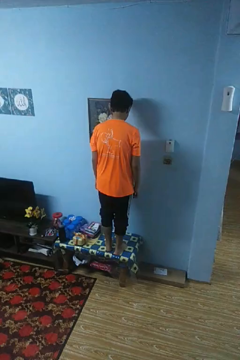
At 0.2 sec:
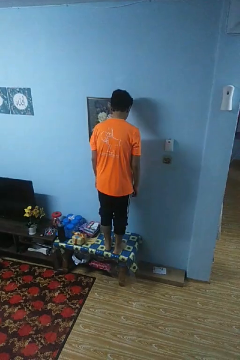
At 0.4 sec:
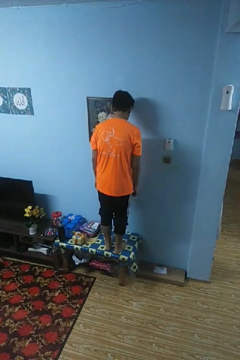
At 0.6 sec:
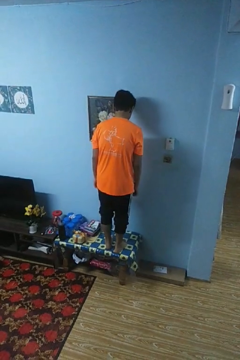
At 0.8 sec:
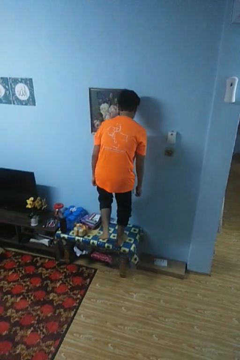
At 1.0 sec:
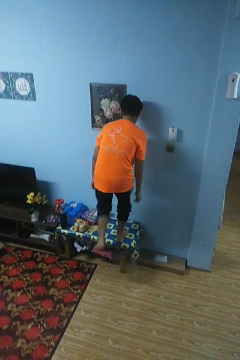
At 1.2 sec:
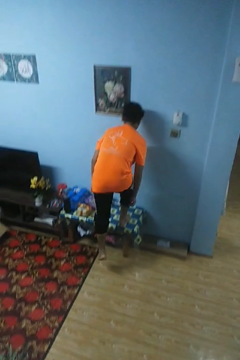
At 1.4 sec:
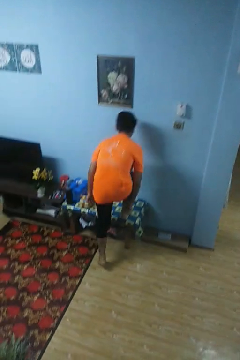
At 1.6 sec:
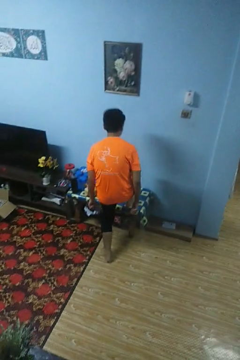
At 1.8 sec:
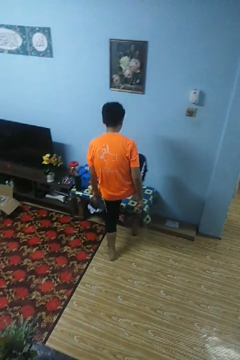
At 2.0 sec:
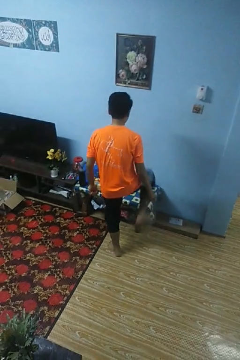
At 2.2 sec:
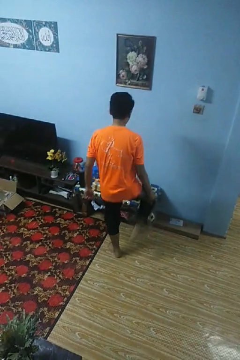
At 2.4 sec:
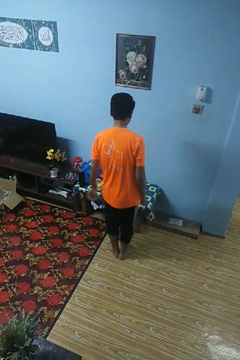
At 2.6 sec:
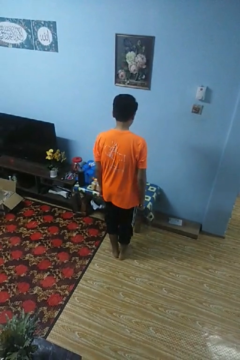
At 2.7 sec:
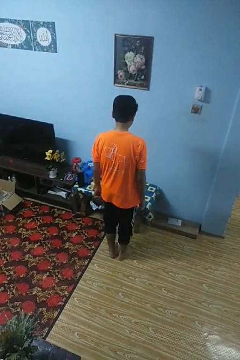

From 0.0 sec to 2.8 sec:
person climbs off table

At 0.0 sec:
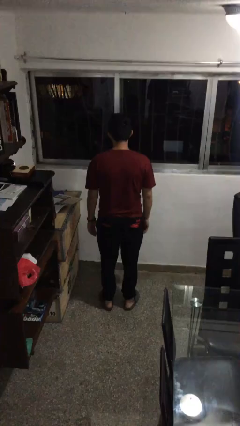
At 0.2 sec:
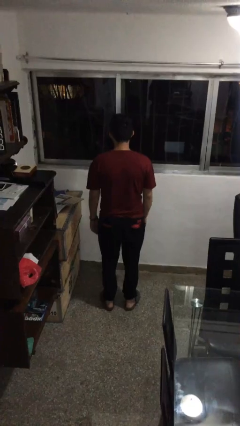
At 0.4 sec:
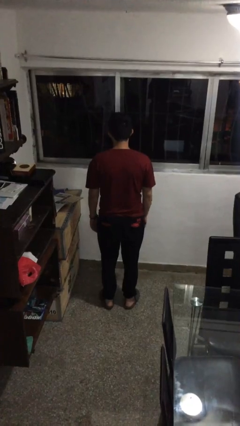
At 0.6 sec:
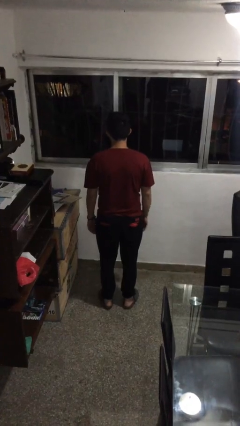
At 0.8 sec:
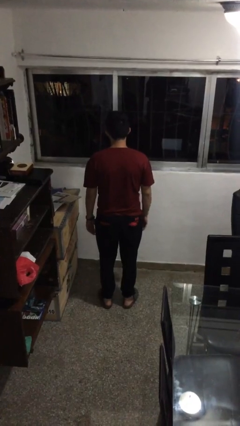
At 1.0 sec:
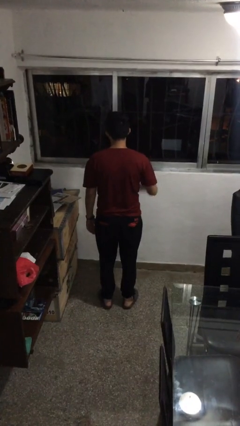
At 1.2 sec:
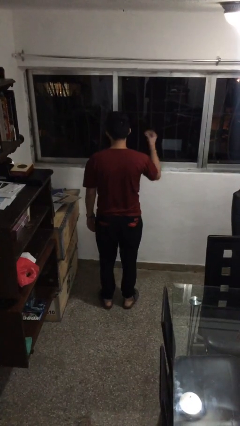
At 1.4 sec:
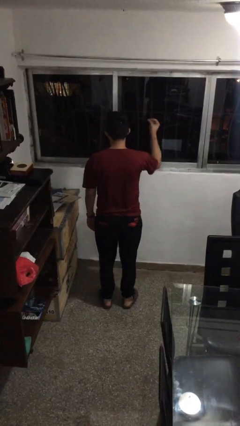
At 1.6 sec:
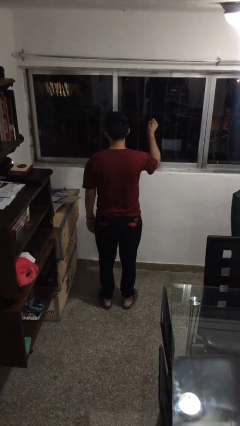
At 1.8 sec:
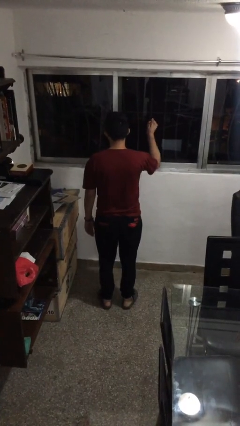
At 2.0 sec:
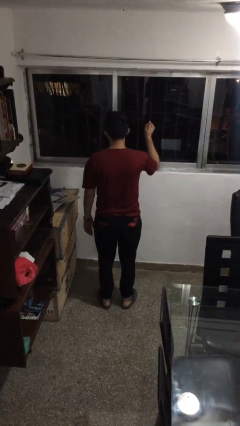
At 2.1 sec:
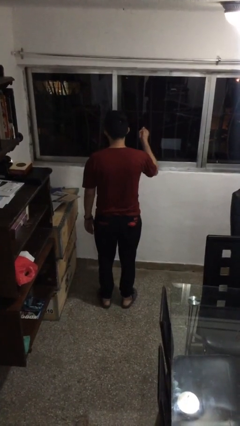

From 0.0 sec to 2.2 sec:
person snaps fingers

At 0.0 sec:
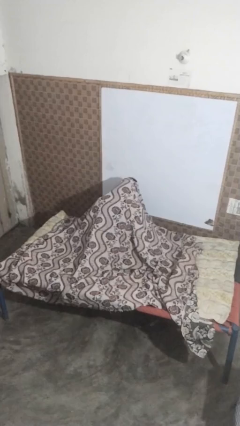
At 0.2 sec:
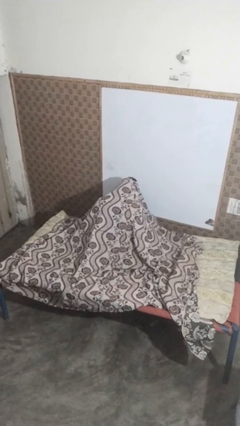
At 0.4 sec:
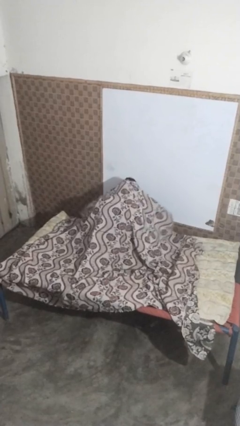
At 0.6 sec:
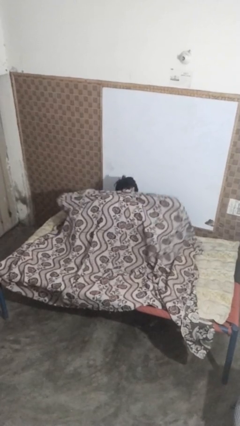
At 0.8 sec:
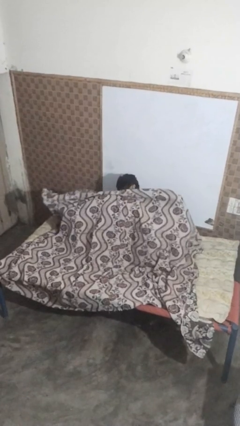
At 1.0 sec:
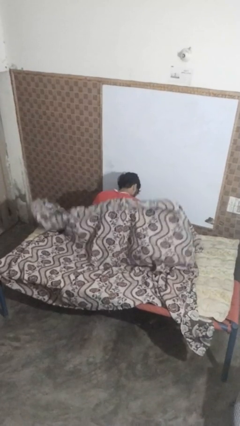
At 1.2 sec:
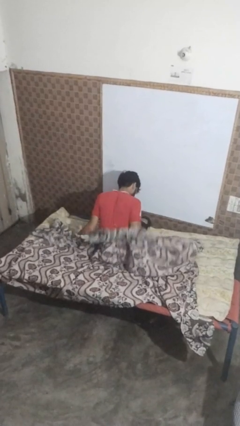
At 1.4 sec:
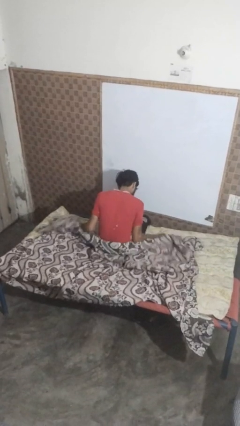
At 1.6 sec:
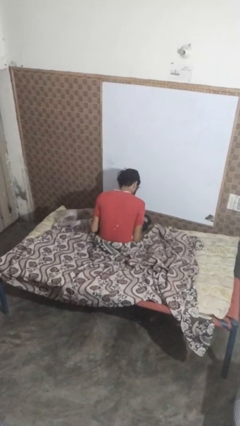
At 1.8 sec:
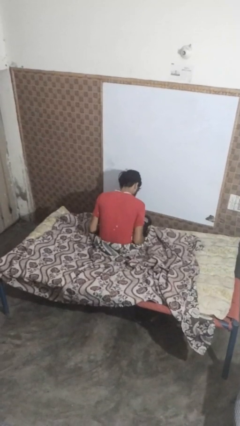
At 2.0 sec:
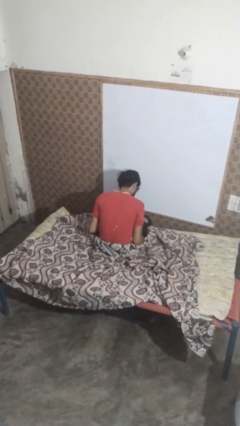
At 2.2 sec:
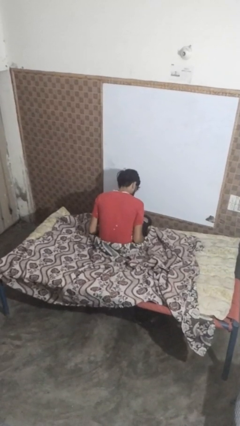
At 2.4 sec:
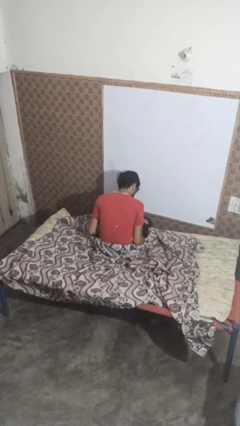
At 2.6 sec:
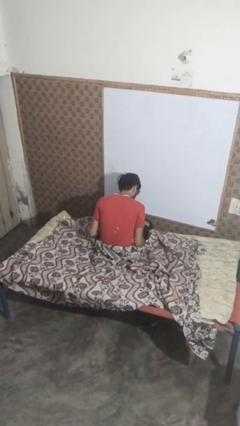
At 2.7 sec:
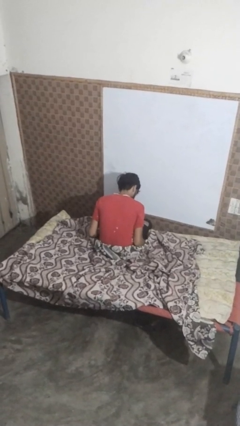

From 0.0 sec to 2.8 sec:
person uncovers with blanket

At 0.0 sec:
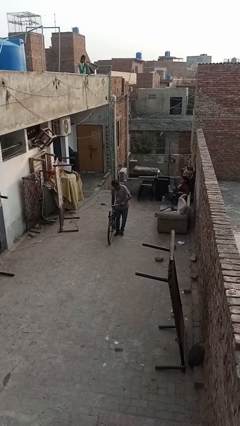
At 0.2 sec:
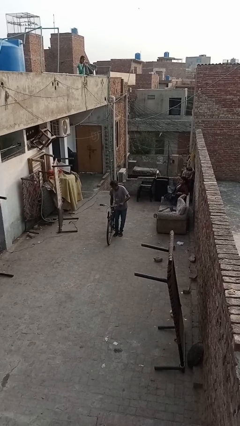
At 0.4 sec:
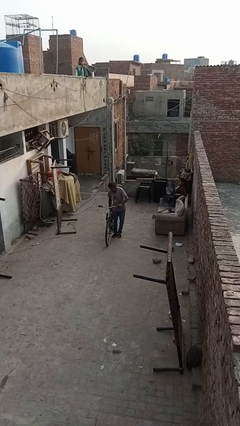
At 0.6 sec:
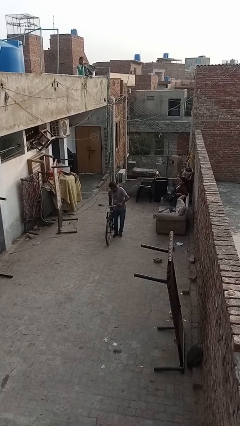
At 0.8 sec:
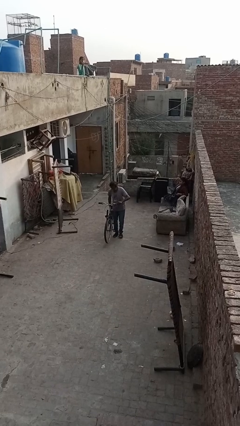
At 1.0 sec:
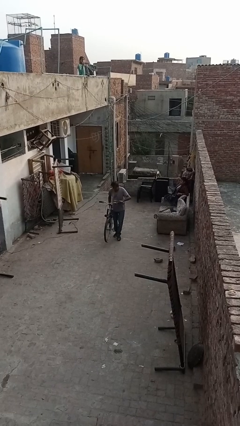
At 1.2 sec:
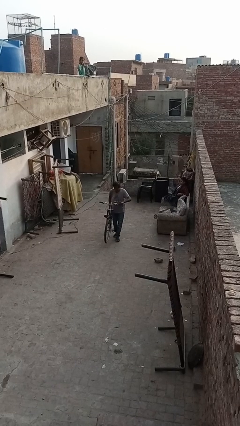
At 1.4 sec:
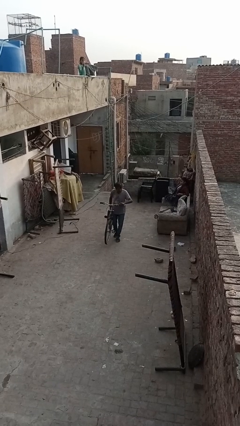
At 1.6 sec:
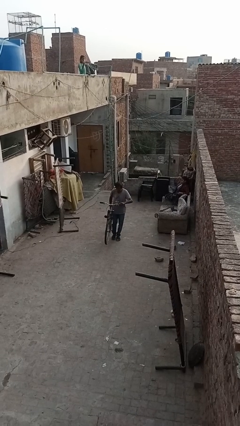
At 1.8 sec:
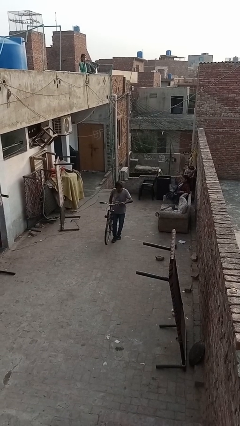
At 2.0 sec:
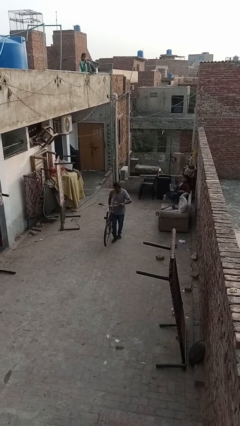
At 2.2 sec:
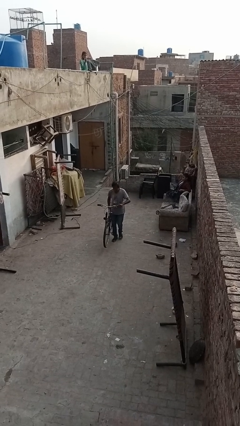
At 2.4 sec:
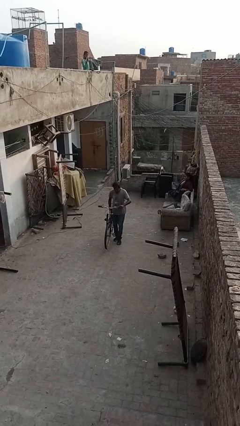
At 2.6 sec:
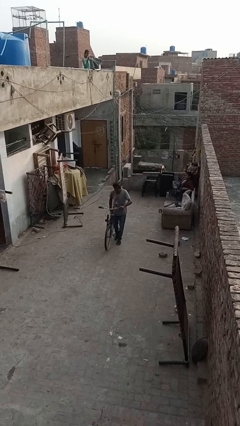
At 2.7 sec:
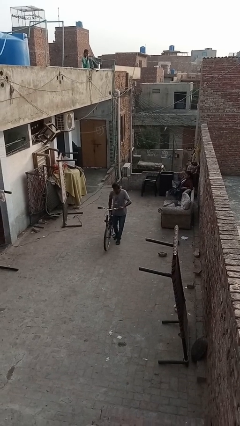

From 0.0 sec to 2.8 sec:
person carries bicycle

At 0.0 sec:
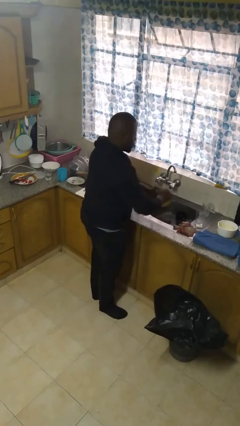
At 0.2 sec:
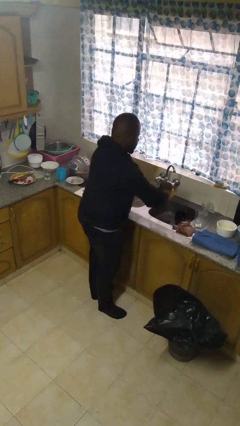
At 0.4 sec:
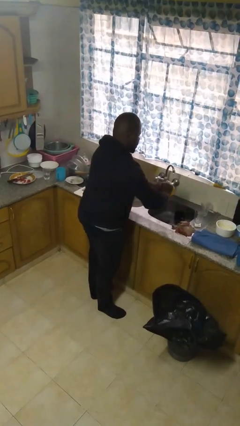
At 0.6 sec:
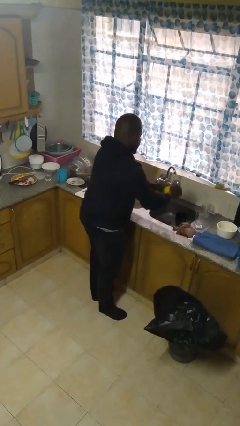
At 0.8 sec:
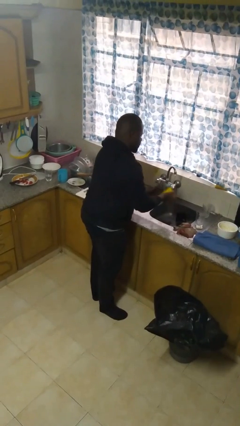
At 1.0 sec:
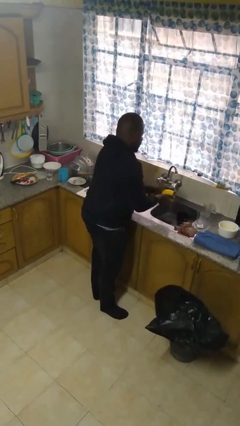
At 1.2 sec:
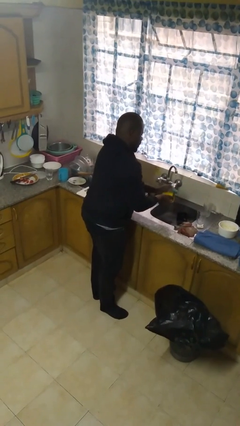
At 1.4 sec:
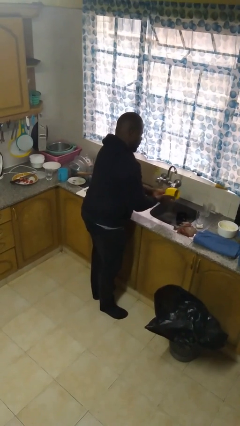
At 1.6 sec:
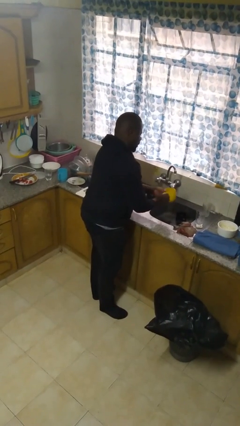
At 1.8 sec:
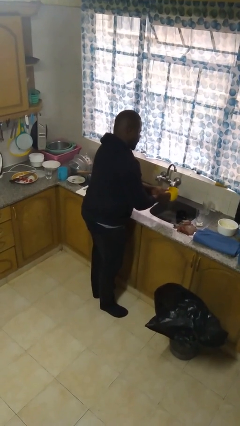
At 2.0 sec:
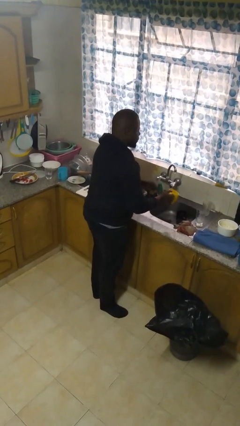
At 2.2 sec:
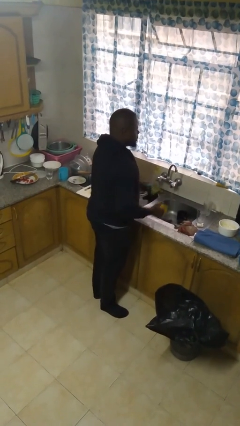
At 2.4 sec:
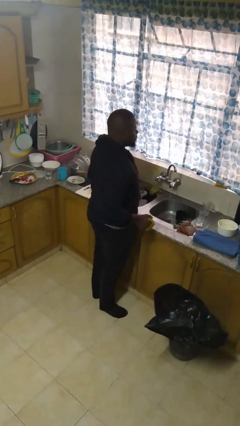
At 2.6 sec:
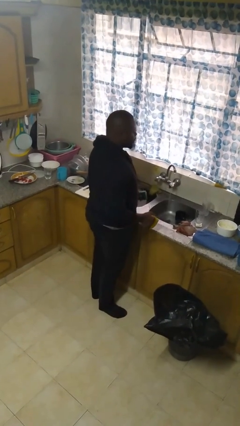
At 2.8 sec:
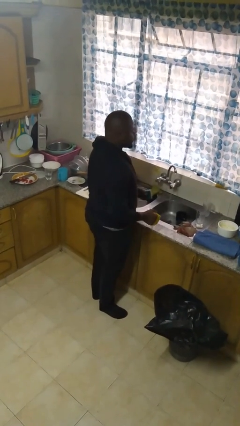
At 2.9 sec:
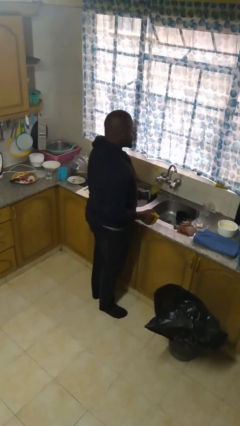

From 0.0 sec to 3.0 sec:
person washes dish

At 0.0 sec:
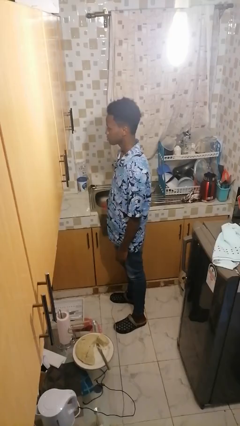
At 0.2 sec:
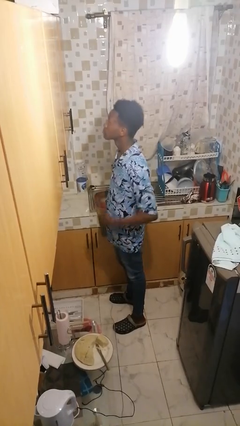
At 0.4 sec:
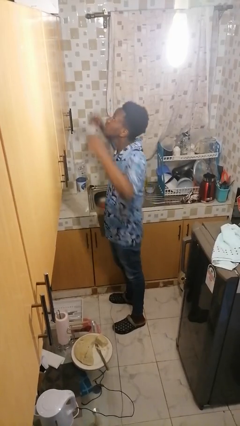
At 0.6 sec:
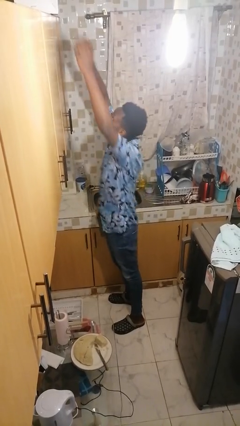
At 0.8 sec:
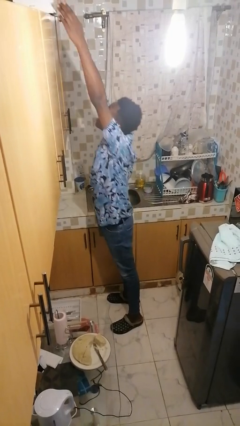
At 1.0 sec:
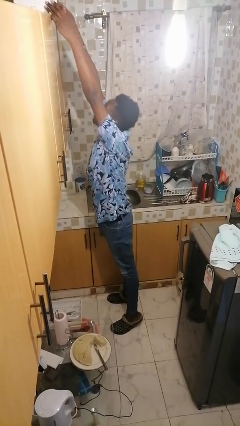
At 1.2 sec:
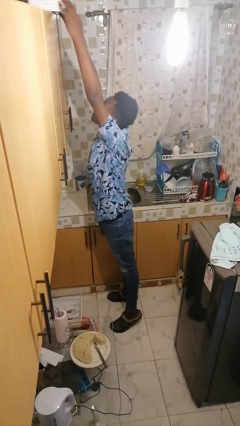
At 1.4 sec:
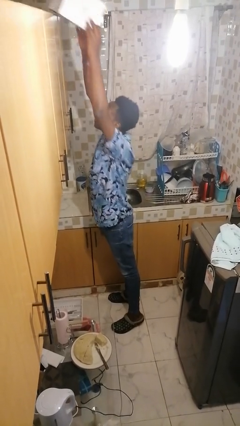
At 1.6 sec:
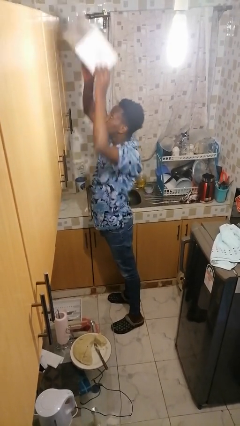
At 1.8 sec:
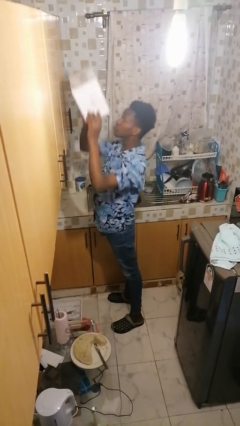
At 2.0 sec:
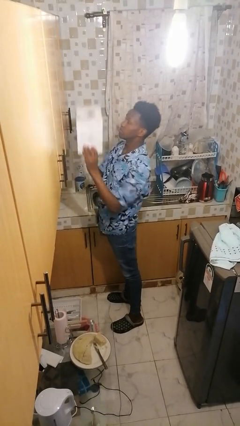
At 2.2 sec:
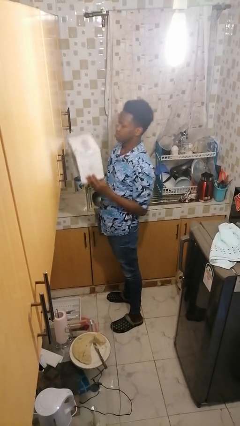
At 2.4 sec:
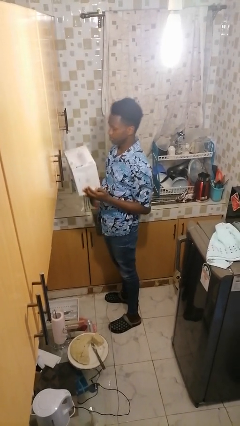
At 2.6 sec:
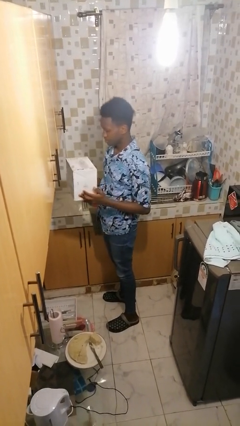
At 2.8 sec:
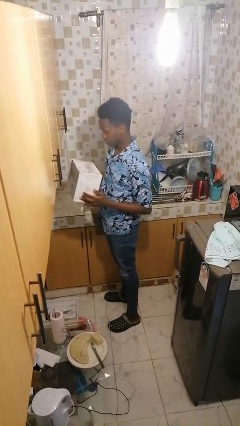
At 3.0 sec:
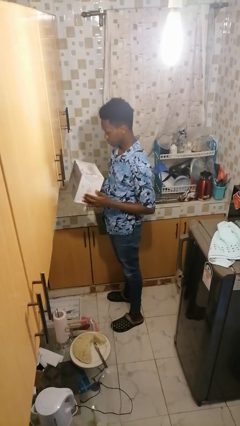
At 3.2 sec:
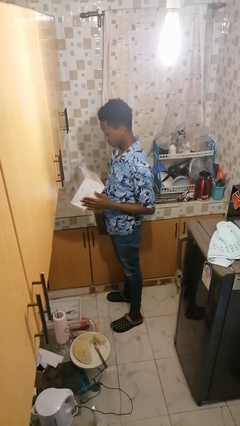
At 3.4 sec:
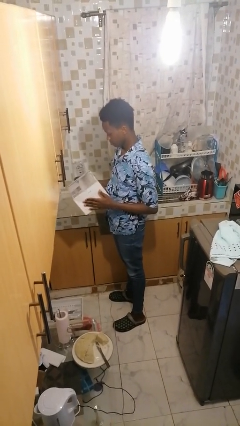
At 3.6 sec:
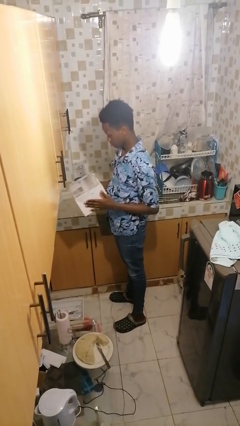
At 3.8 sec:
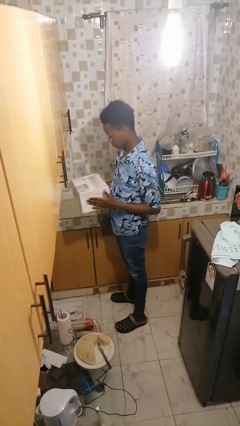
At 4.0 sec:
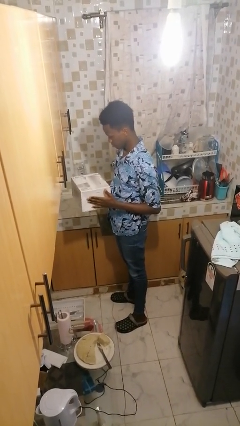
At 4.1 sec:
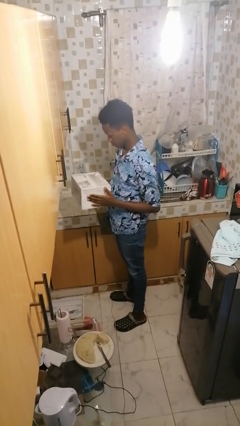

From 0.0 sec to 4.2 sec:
person picks up object from shelf
